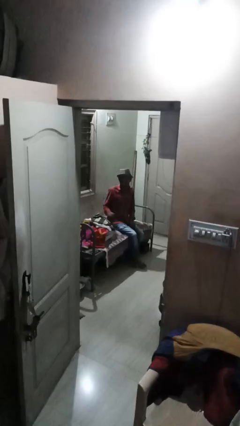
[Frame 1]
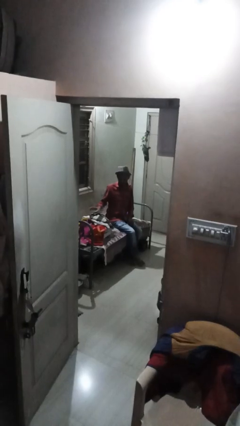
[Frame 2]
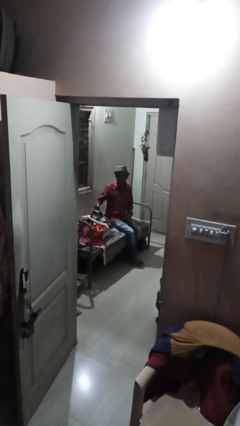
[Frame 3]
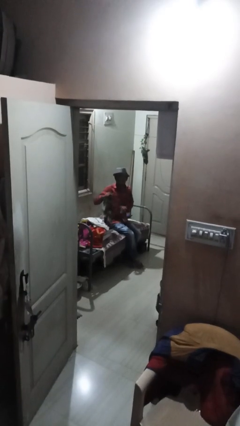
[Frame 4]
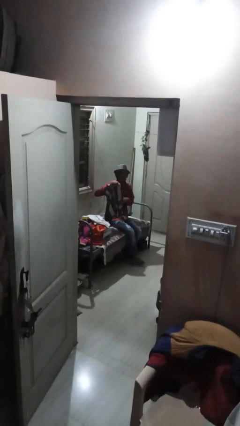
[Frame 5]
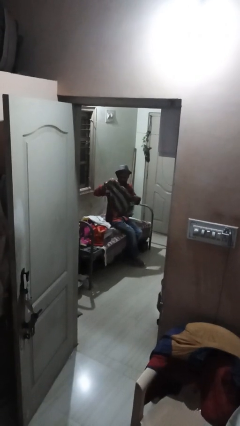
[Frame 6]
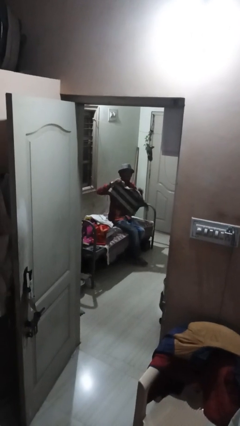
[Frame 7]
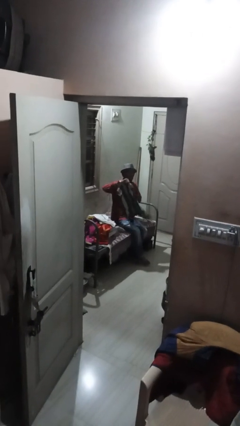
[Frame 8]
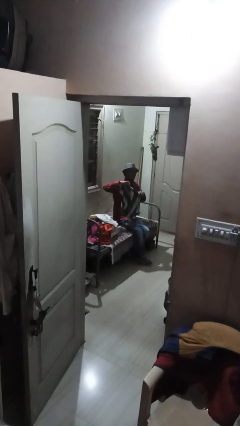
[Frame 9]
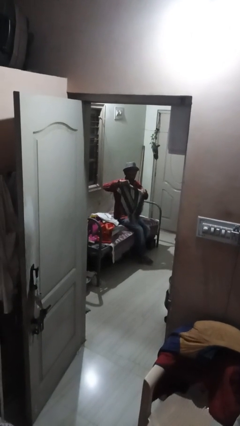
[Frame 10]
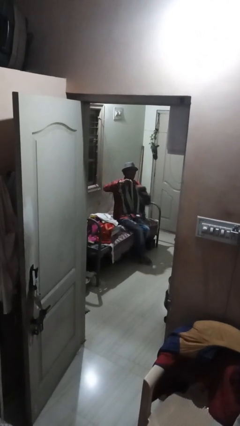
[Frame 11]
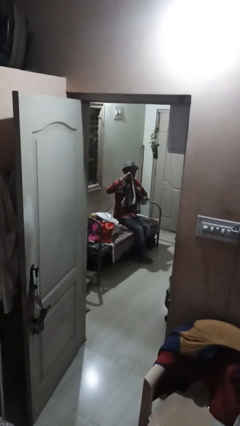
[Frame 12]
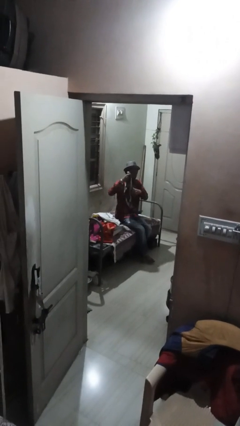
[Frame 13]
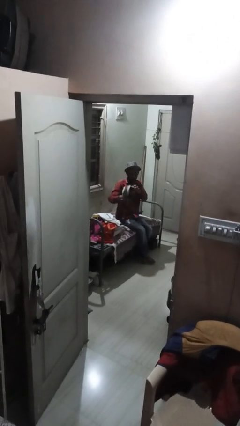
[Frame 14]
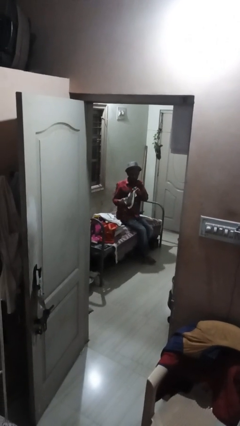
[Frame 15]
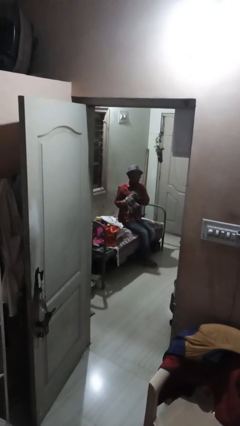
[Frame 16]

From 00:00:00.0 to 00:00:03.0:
person folds shirt

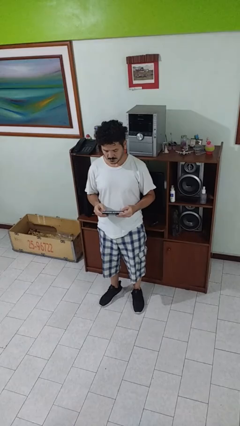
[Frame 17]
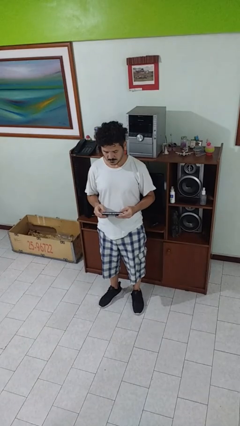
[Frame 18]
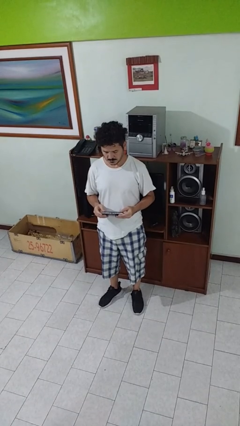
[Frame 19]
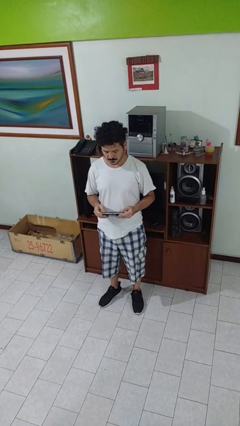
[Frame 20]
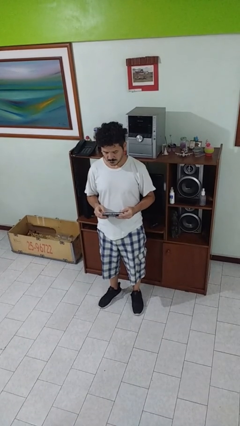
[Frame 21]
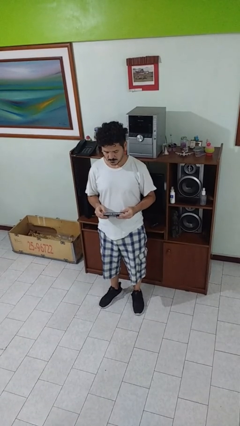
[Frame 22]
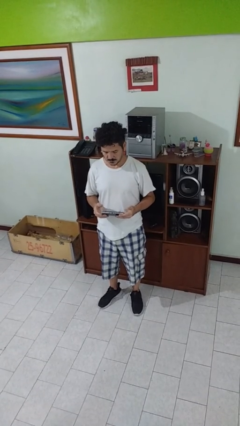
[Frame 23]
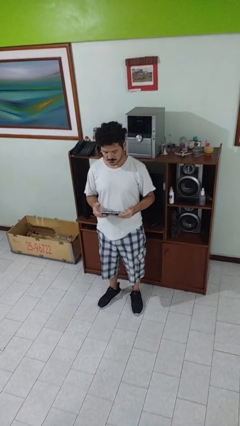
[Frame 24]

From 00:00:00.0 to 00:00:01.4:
person interacts with handheld game

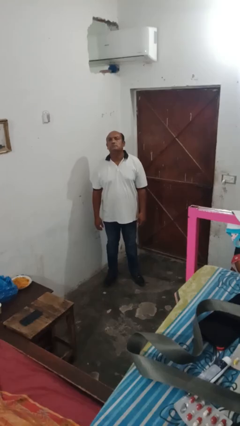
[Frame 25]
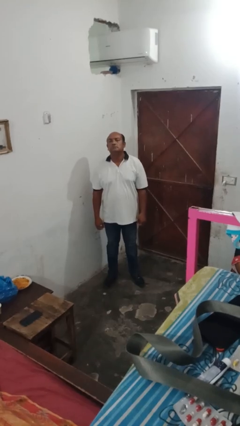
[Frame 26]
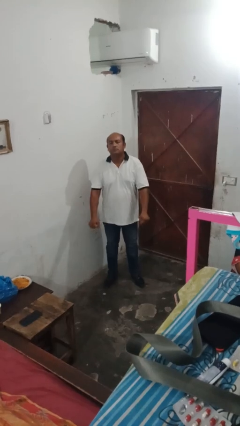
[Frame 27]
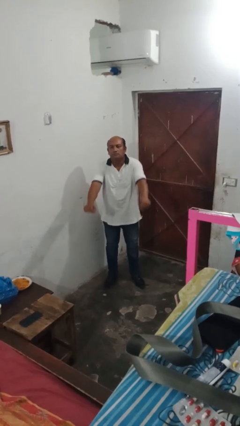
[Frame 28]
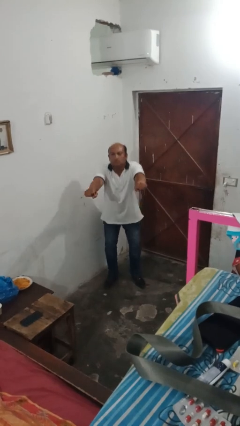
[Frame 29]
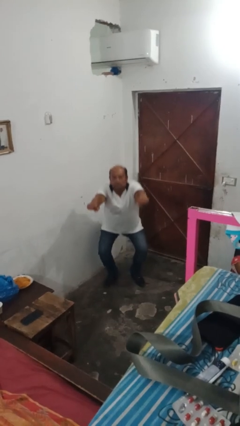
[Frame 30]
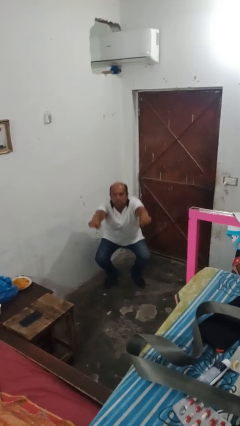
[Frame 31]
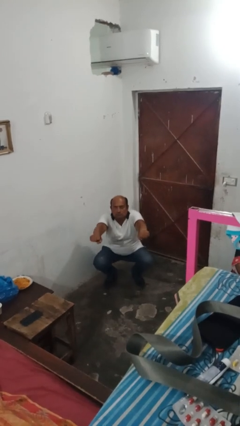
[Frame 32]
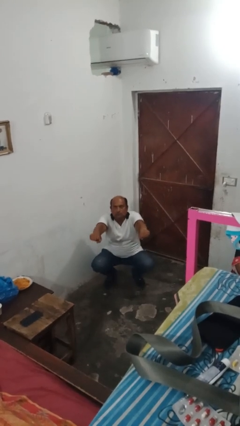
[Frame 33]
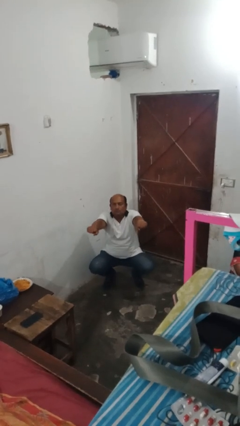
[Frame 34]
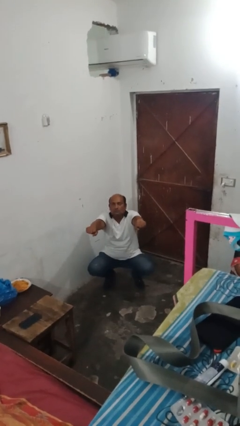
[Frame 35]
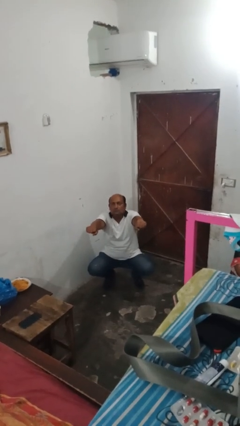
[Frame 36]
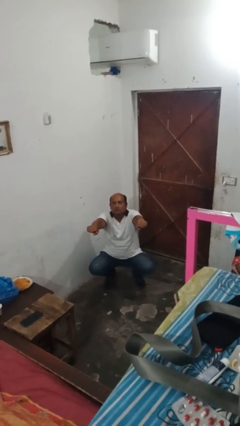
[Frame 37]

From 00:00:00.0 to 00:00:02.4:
person squats

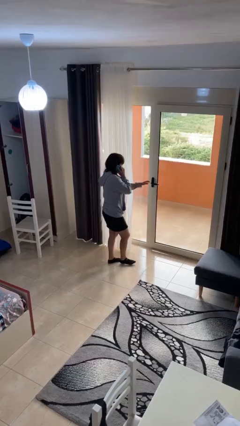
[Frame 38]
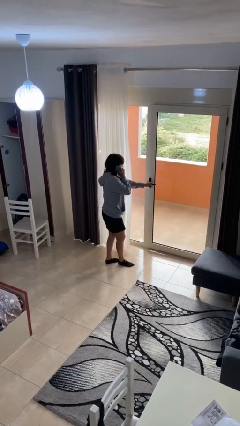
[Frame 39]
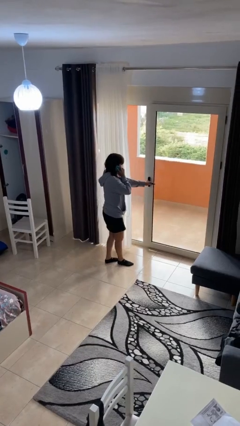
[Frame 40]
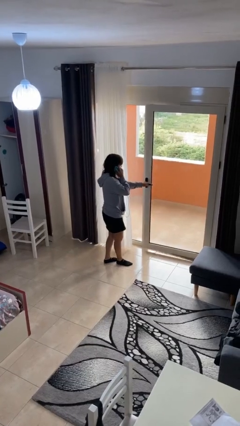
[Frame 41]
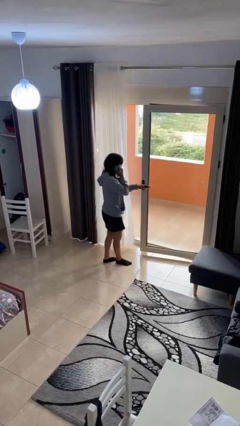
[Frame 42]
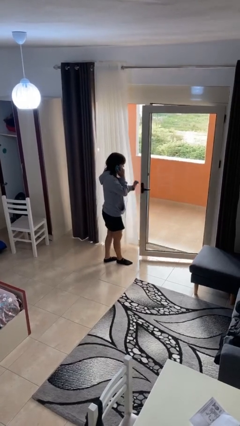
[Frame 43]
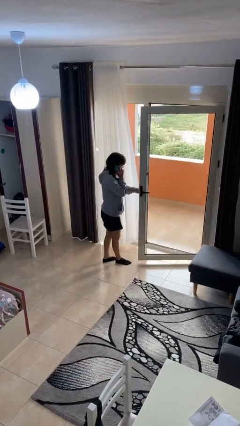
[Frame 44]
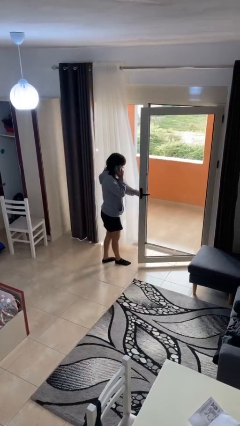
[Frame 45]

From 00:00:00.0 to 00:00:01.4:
person opens facility door

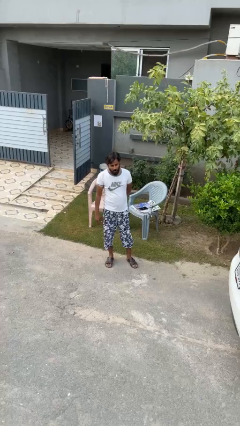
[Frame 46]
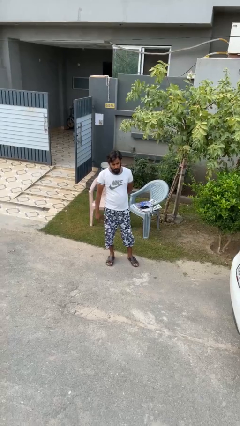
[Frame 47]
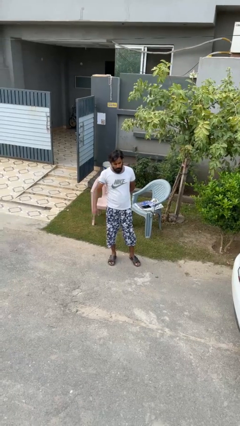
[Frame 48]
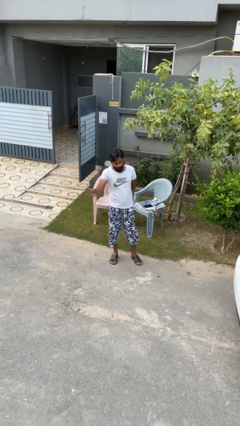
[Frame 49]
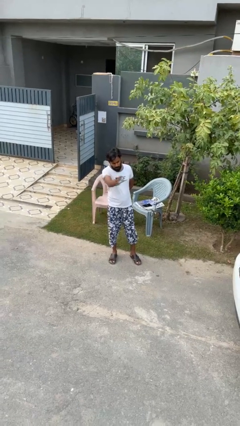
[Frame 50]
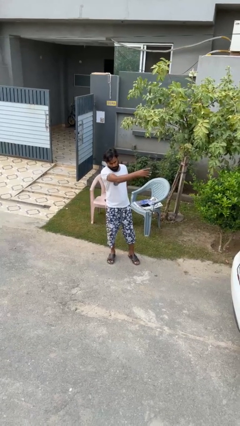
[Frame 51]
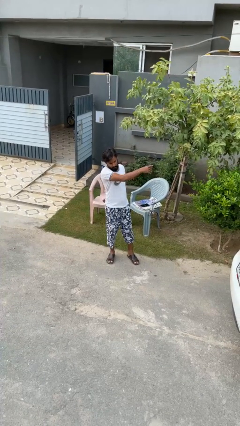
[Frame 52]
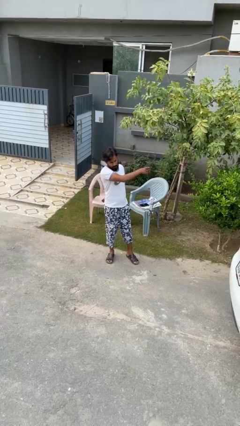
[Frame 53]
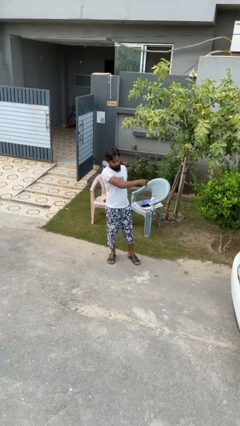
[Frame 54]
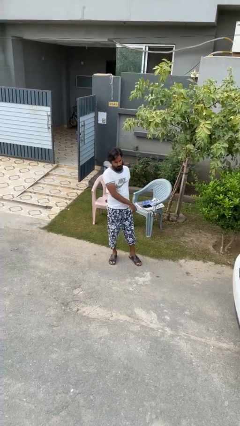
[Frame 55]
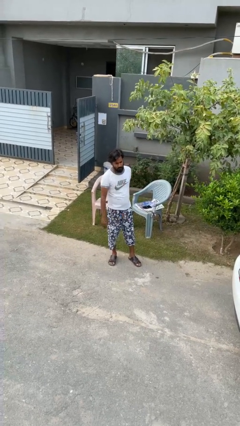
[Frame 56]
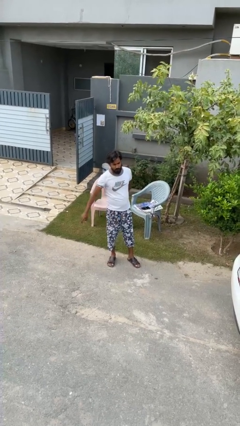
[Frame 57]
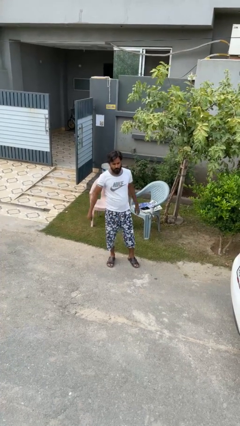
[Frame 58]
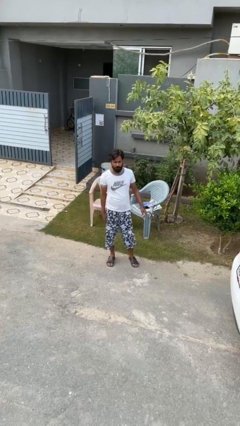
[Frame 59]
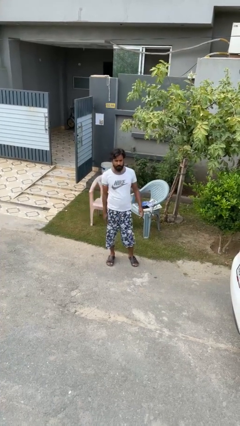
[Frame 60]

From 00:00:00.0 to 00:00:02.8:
person gestures swipe left

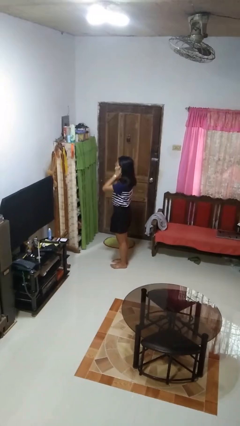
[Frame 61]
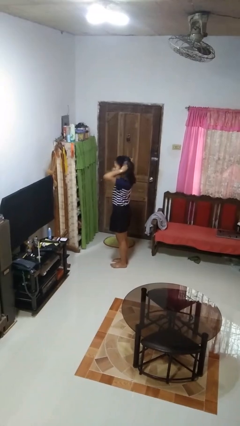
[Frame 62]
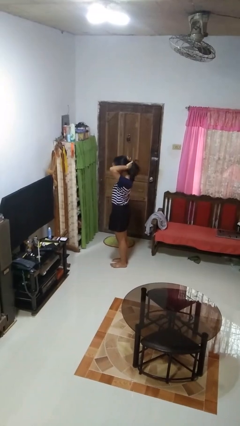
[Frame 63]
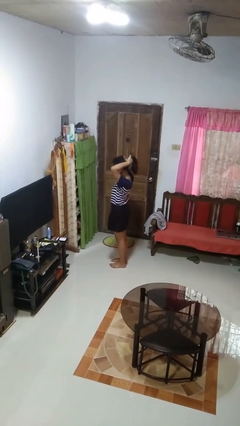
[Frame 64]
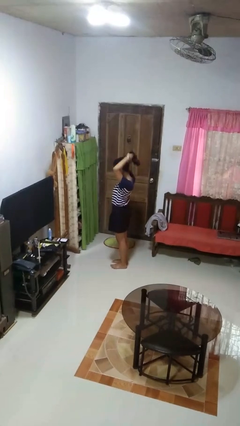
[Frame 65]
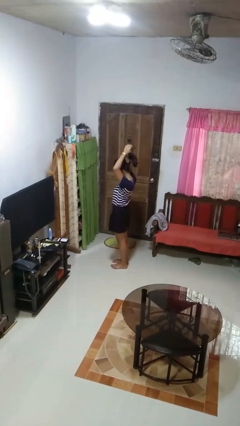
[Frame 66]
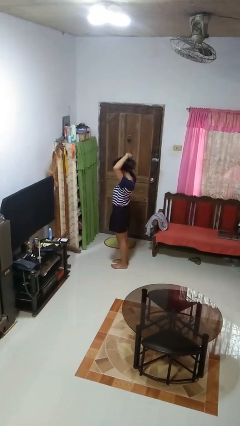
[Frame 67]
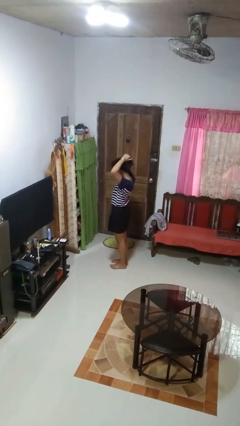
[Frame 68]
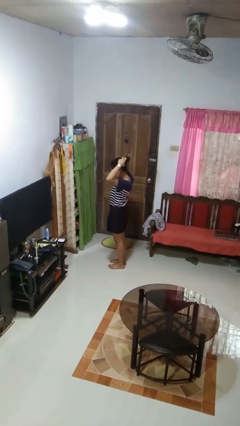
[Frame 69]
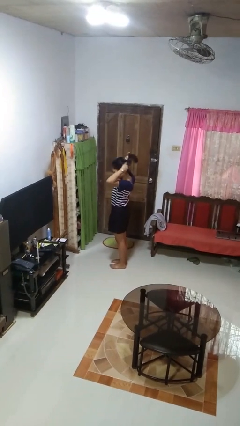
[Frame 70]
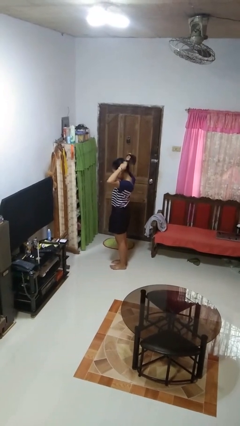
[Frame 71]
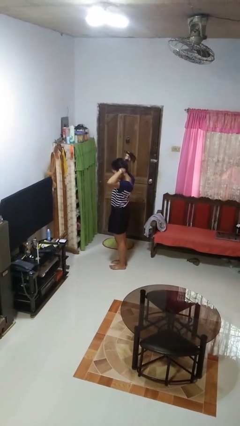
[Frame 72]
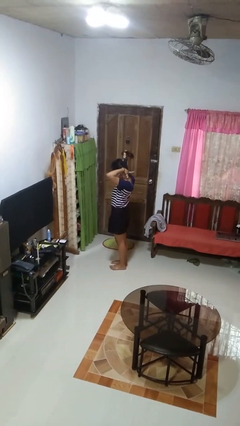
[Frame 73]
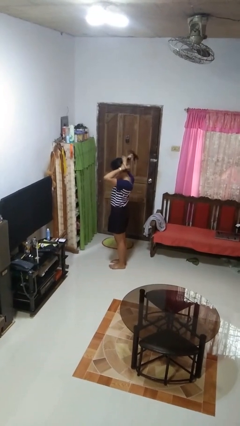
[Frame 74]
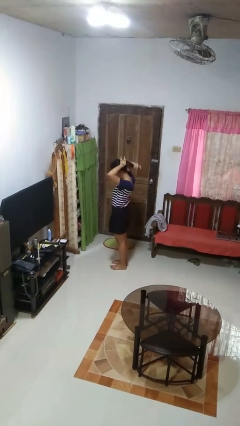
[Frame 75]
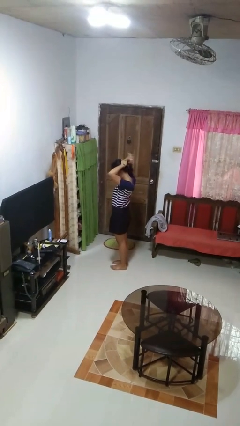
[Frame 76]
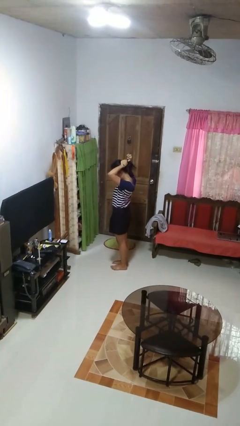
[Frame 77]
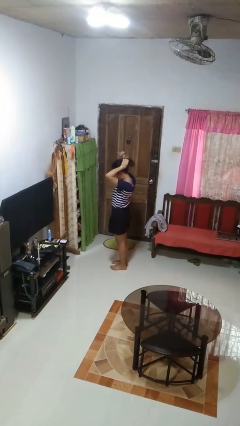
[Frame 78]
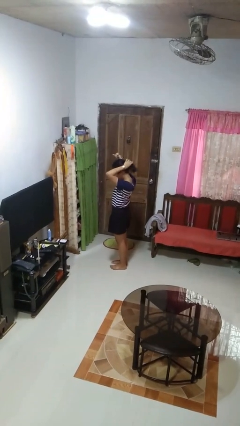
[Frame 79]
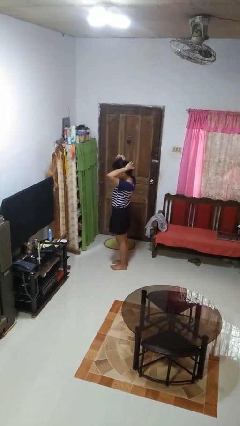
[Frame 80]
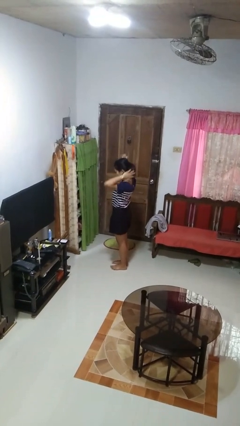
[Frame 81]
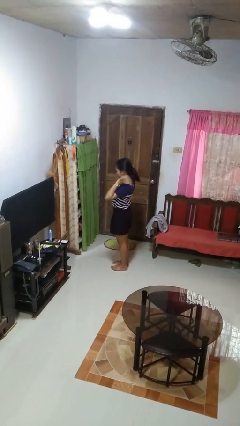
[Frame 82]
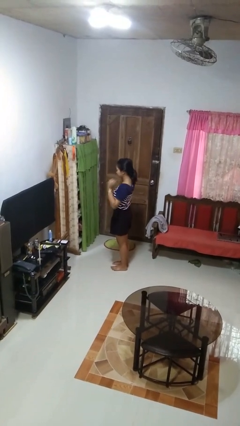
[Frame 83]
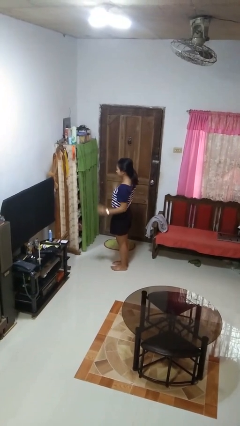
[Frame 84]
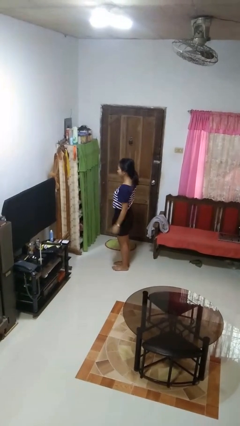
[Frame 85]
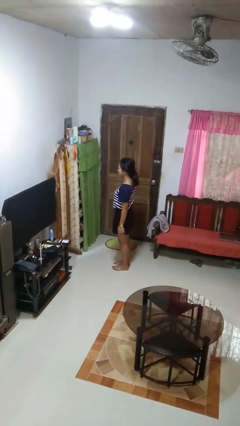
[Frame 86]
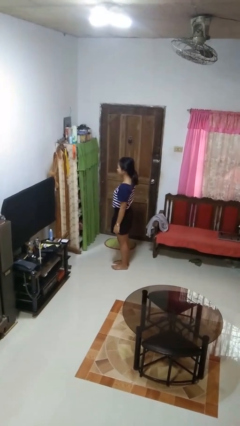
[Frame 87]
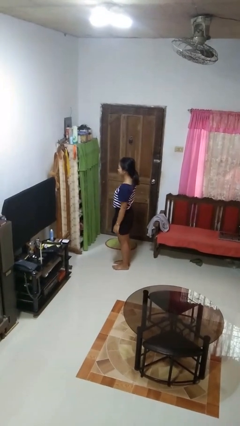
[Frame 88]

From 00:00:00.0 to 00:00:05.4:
person puts hair in ponytail

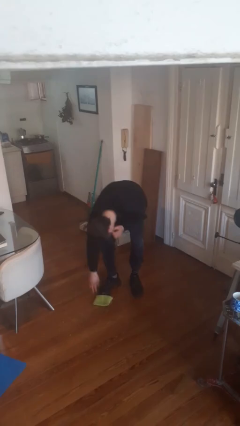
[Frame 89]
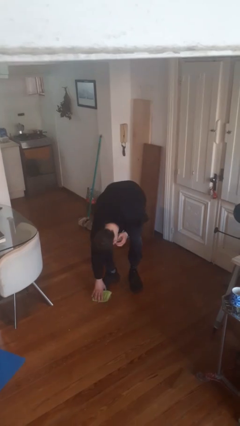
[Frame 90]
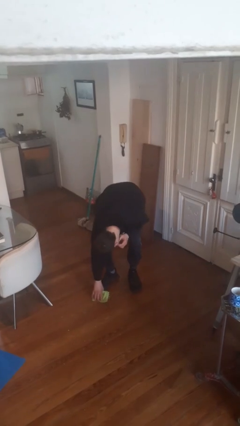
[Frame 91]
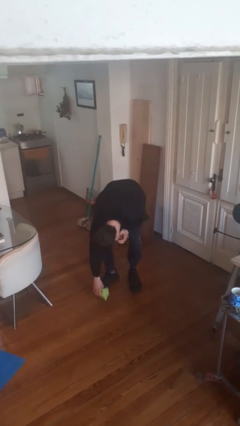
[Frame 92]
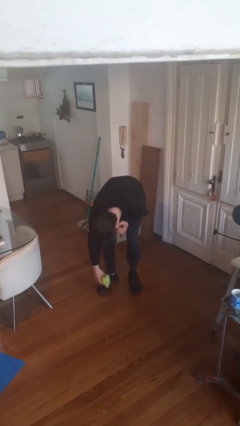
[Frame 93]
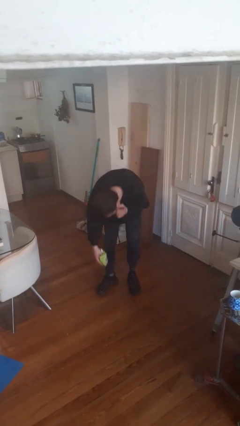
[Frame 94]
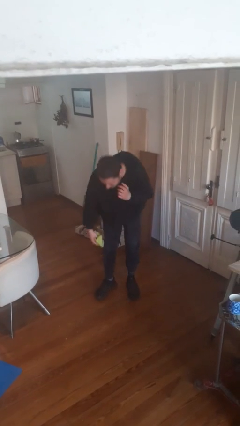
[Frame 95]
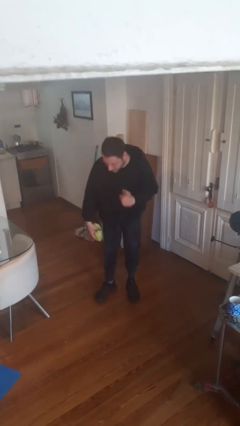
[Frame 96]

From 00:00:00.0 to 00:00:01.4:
person picks up object from floor
